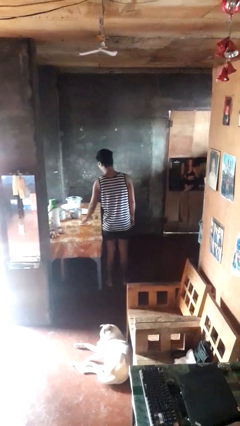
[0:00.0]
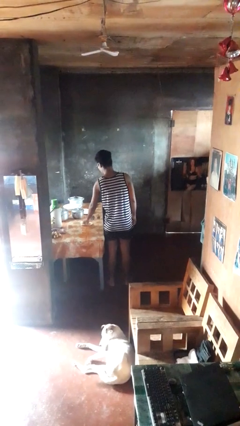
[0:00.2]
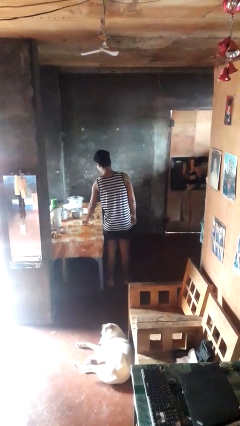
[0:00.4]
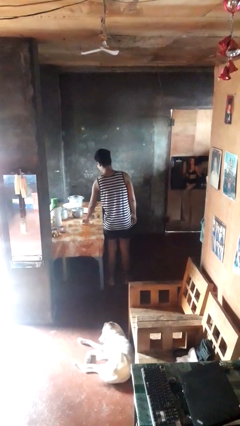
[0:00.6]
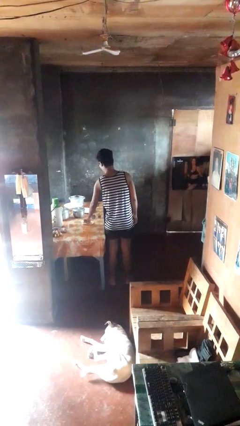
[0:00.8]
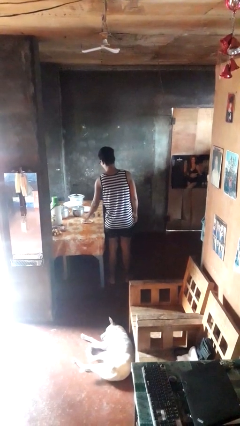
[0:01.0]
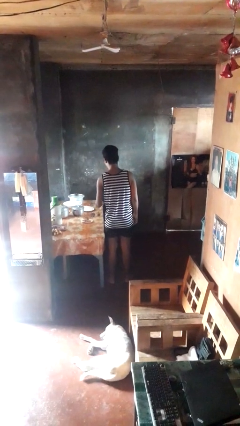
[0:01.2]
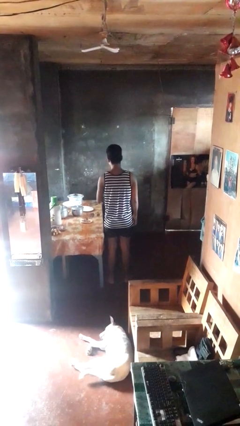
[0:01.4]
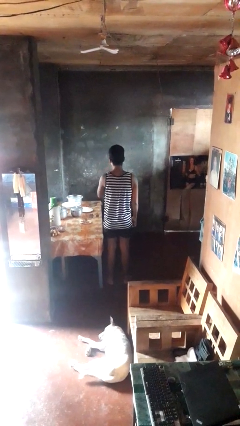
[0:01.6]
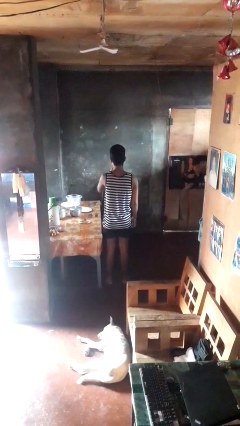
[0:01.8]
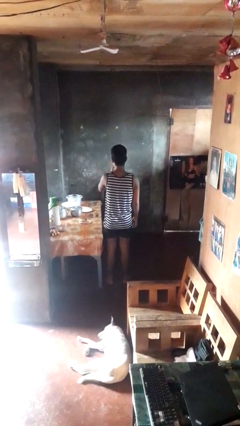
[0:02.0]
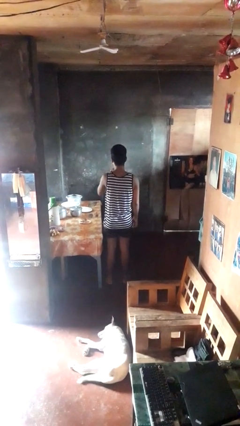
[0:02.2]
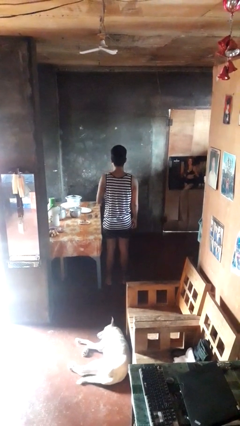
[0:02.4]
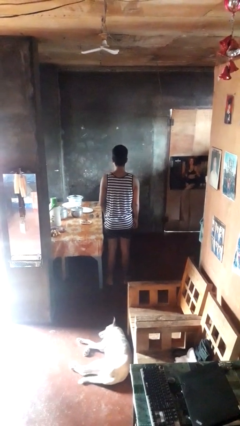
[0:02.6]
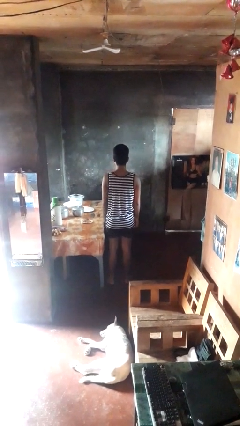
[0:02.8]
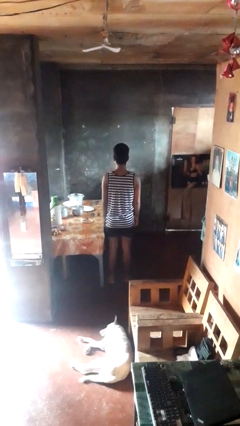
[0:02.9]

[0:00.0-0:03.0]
person eats with hands

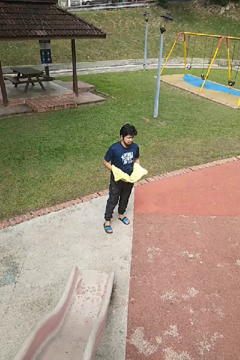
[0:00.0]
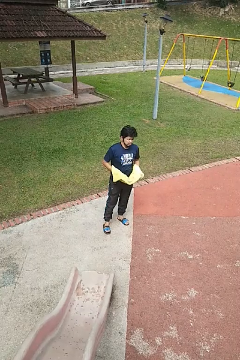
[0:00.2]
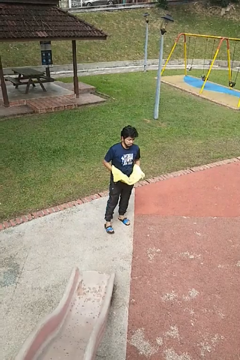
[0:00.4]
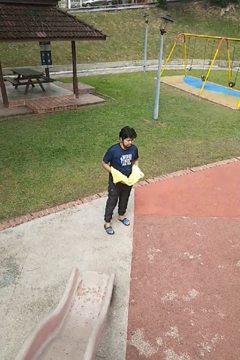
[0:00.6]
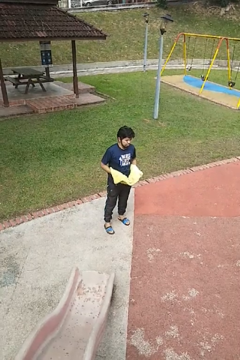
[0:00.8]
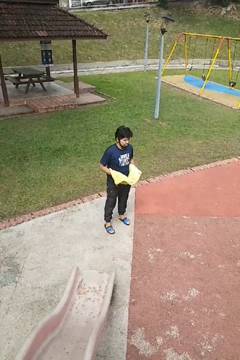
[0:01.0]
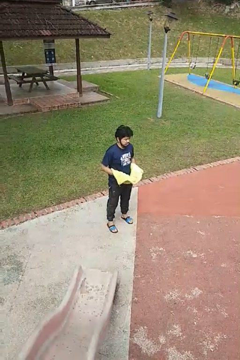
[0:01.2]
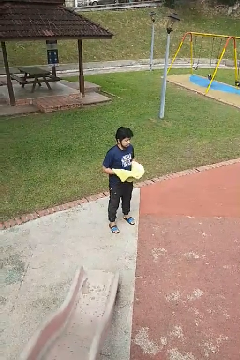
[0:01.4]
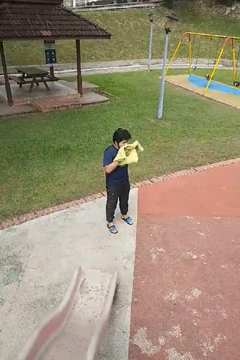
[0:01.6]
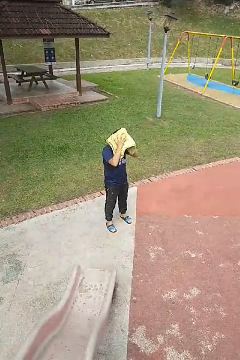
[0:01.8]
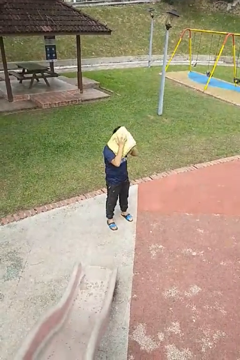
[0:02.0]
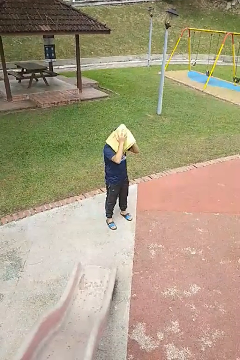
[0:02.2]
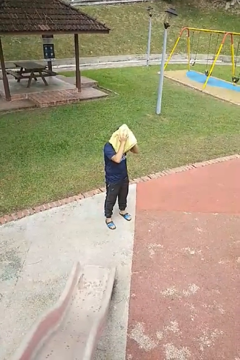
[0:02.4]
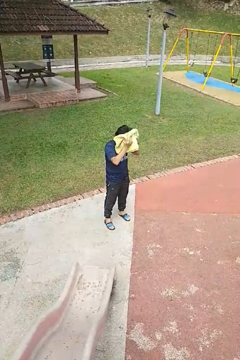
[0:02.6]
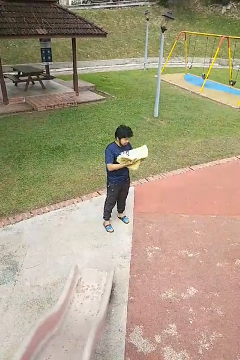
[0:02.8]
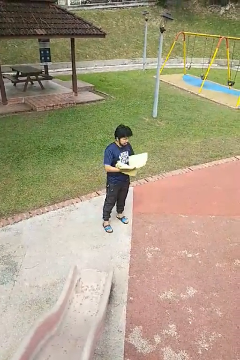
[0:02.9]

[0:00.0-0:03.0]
person dries hair with towel

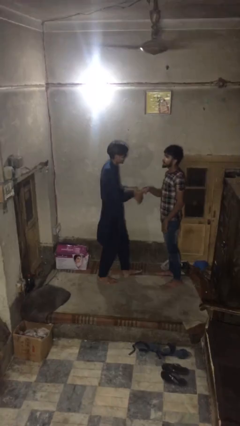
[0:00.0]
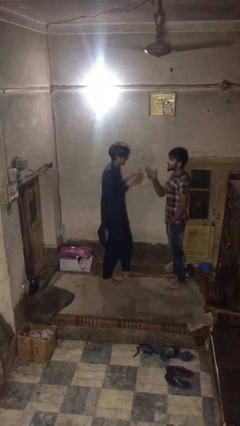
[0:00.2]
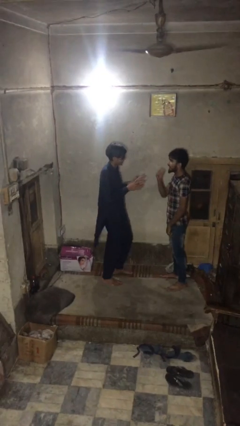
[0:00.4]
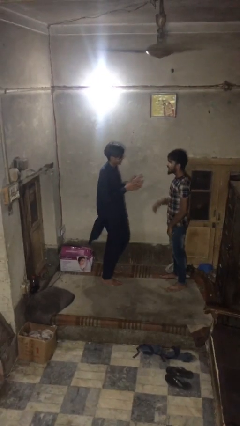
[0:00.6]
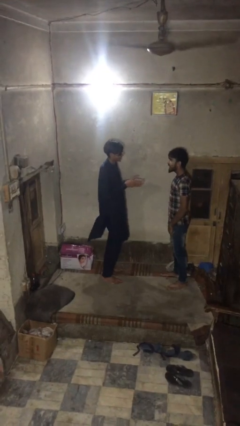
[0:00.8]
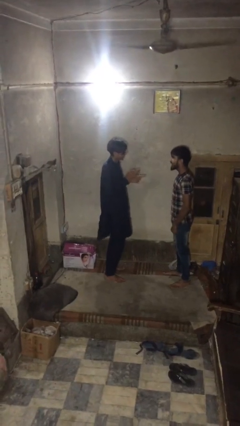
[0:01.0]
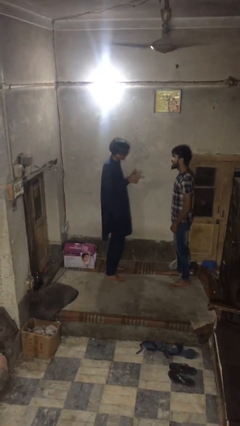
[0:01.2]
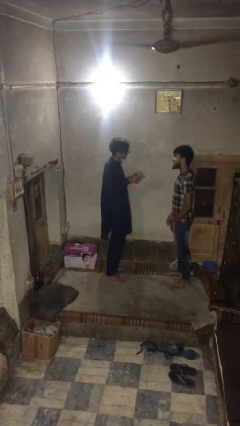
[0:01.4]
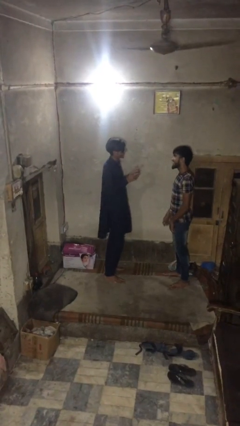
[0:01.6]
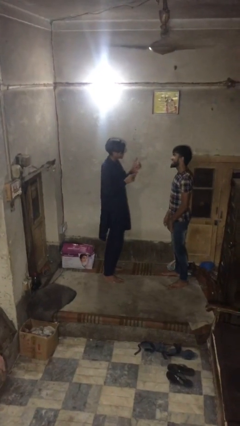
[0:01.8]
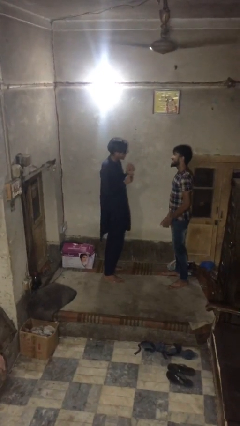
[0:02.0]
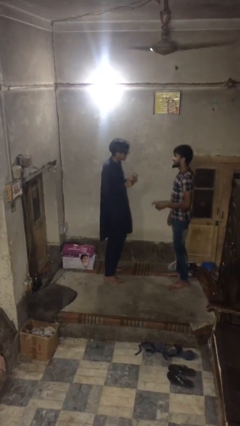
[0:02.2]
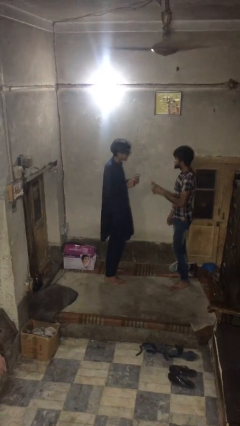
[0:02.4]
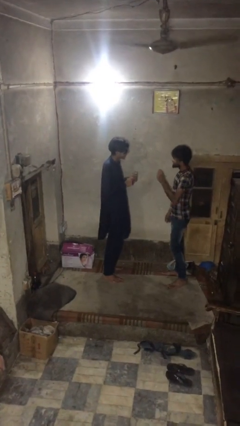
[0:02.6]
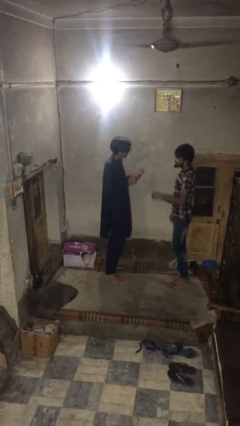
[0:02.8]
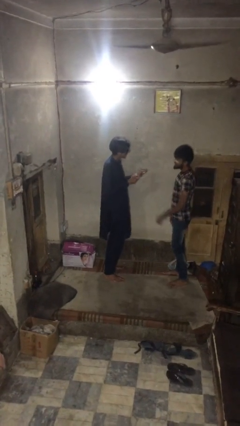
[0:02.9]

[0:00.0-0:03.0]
person talks to person

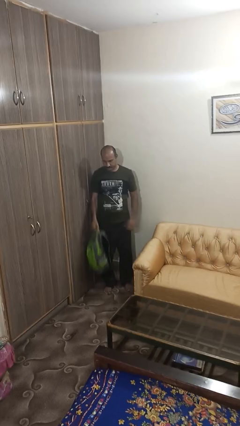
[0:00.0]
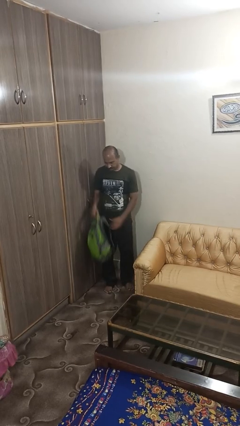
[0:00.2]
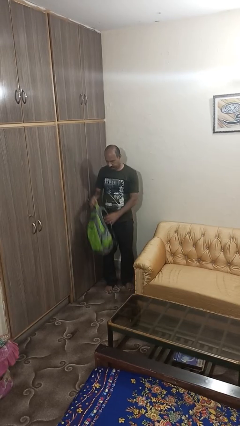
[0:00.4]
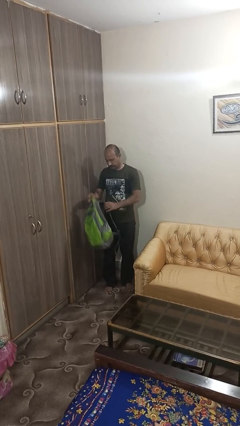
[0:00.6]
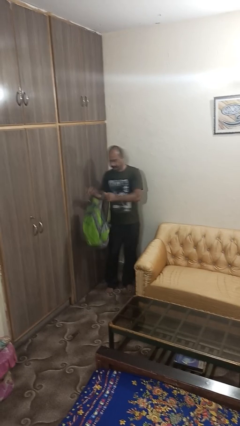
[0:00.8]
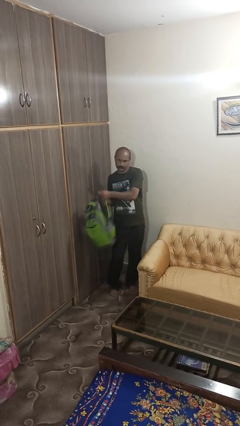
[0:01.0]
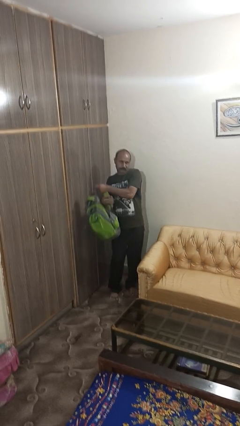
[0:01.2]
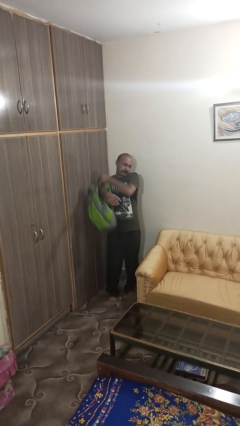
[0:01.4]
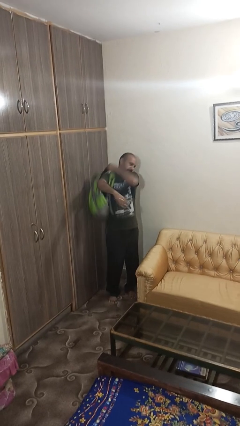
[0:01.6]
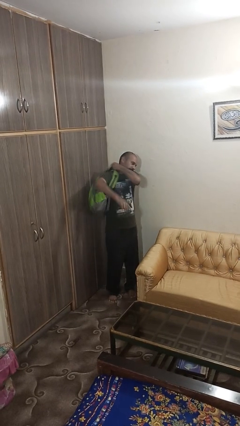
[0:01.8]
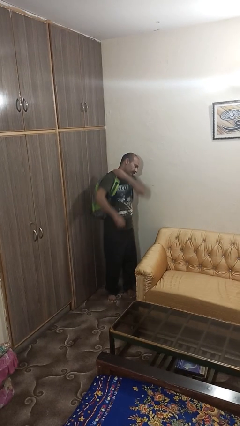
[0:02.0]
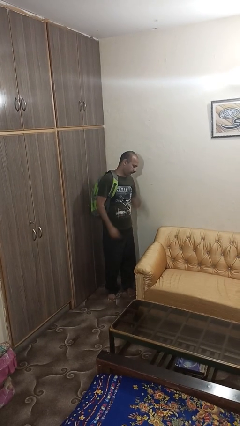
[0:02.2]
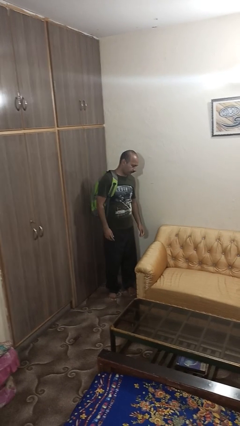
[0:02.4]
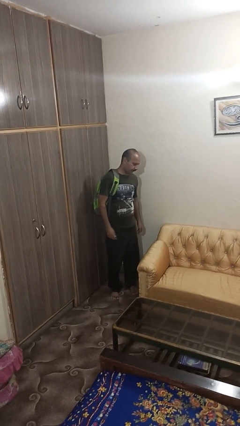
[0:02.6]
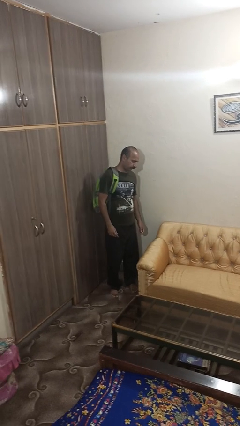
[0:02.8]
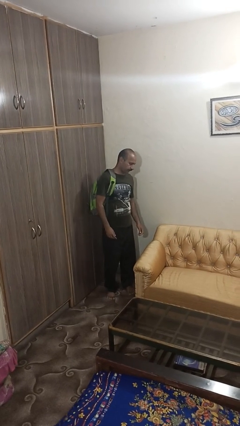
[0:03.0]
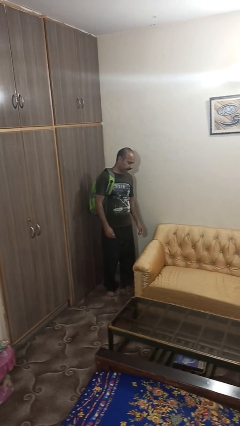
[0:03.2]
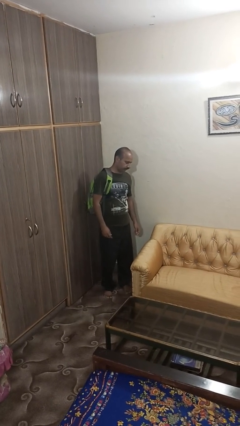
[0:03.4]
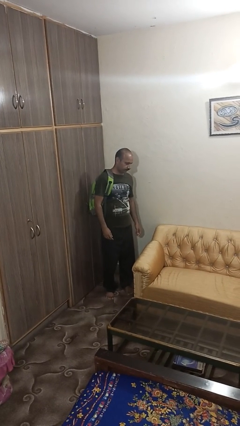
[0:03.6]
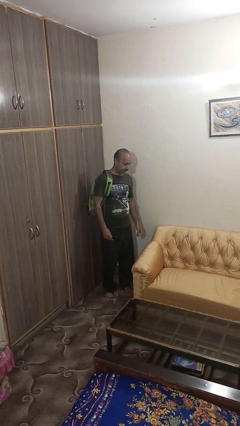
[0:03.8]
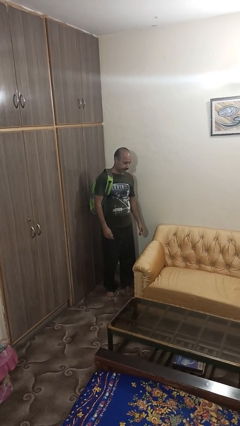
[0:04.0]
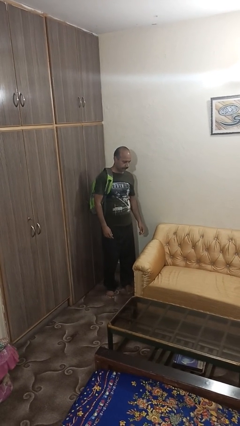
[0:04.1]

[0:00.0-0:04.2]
person puts on backpack

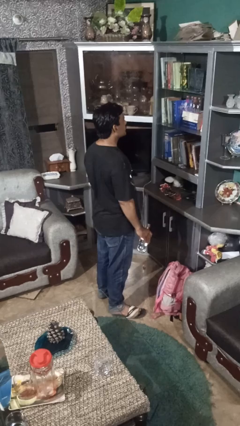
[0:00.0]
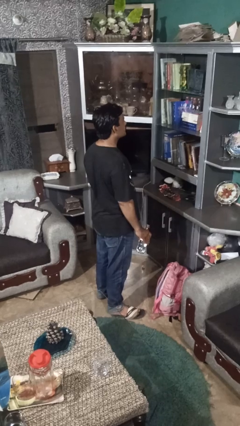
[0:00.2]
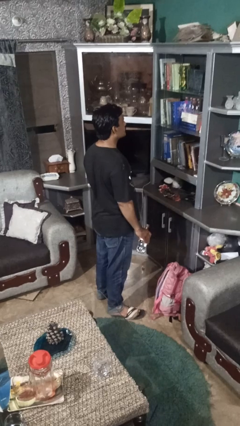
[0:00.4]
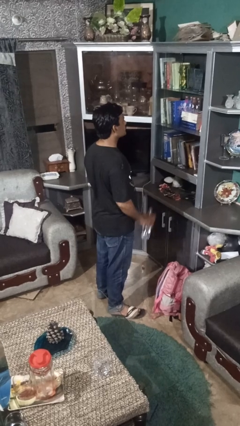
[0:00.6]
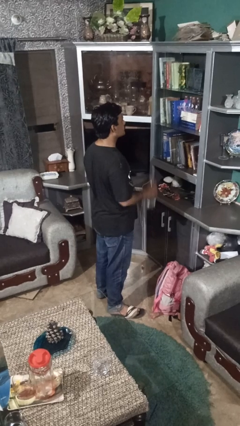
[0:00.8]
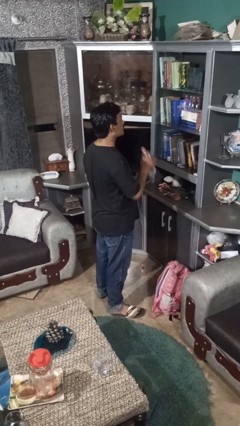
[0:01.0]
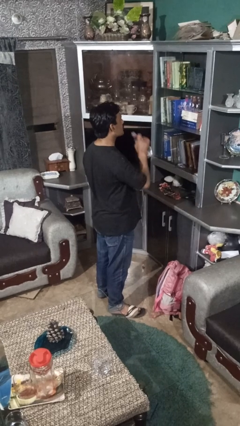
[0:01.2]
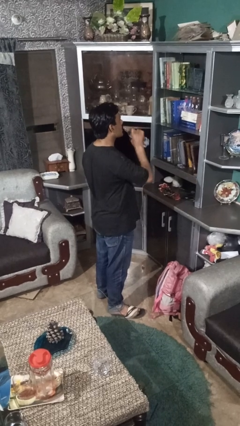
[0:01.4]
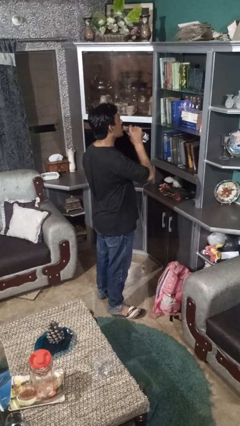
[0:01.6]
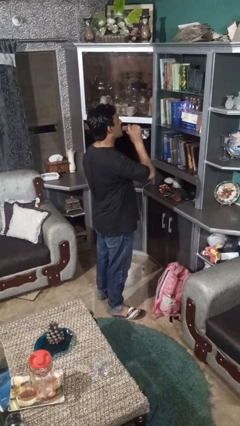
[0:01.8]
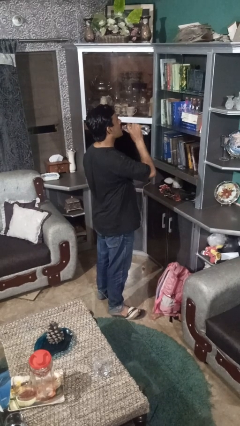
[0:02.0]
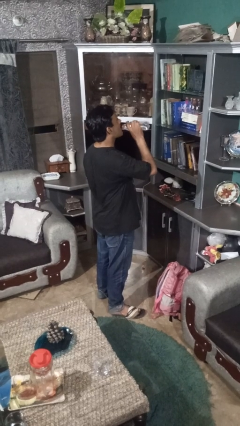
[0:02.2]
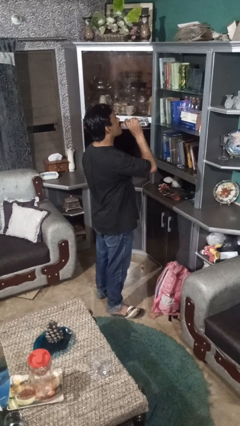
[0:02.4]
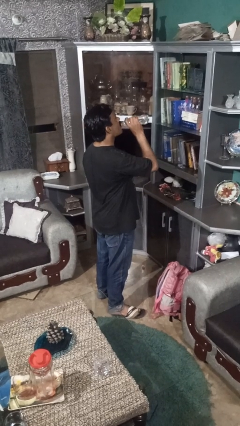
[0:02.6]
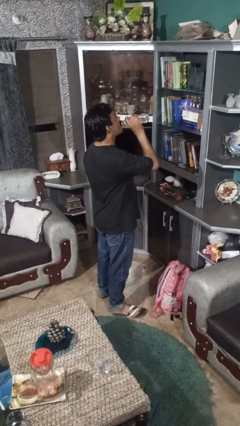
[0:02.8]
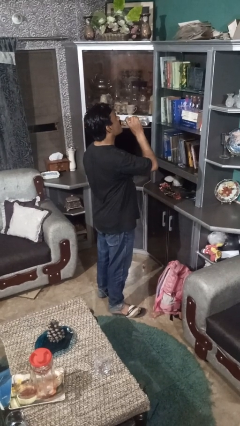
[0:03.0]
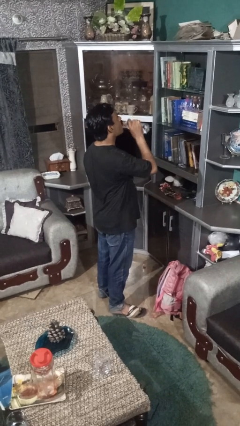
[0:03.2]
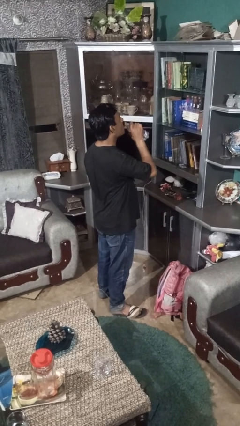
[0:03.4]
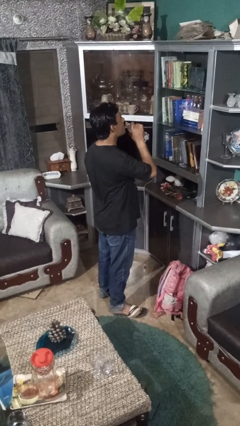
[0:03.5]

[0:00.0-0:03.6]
person drinks from bottle

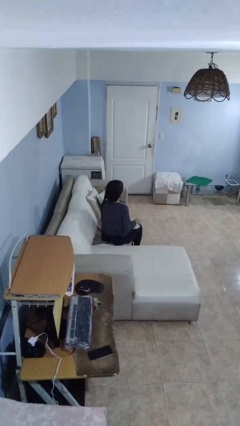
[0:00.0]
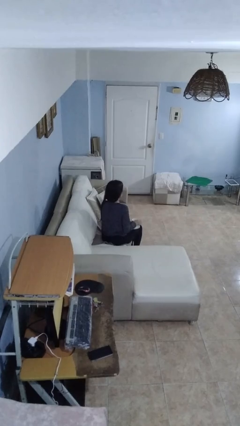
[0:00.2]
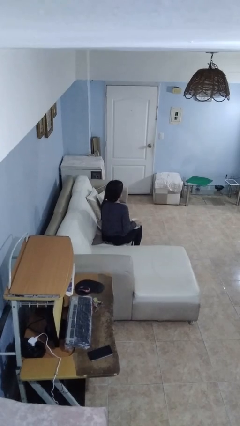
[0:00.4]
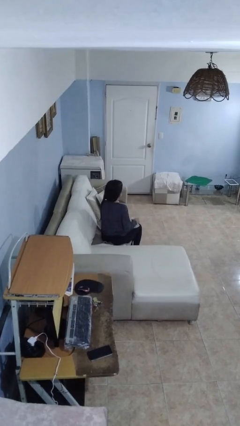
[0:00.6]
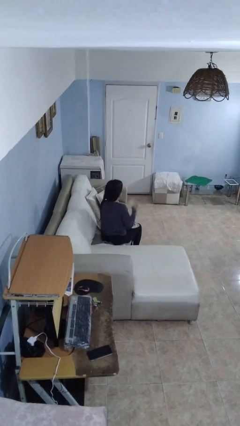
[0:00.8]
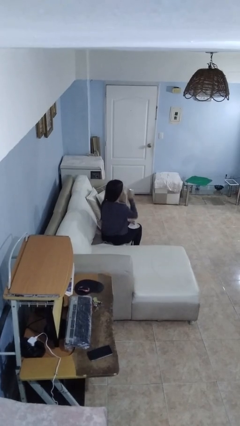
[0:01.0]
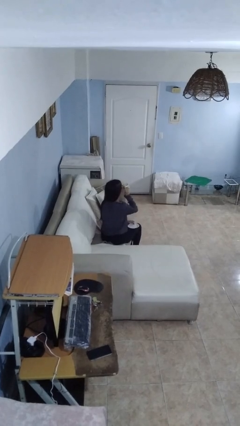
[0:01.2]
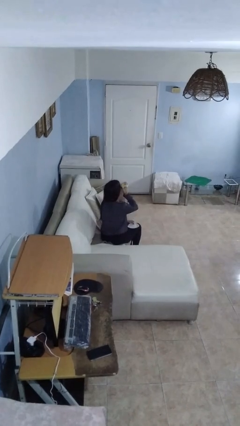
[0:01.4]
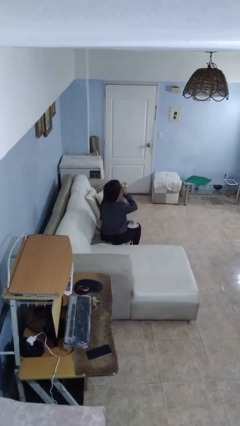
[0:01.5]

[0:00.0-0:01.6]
person drinks from mug
